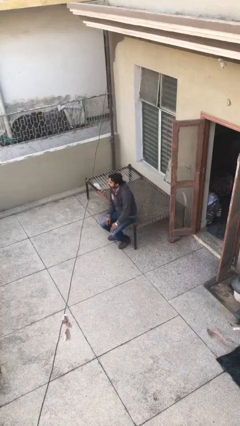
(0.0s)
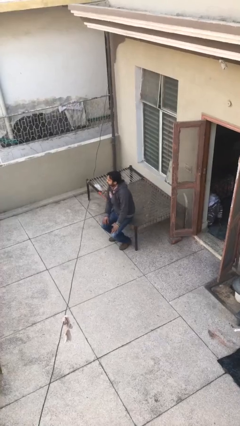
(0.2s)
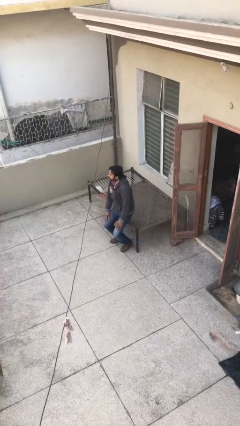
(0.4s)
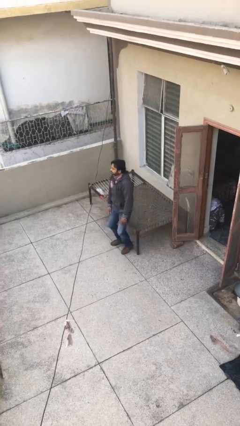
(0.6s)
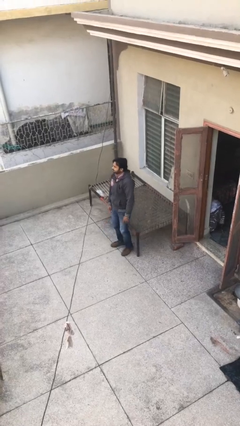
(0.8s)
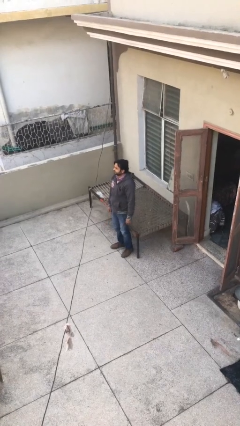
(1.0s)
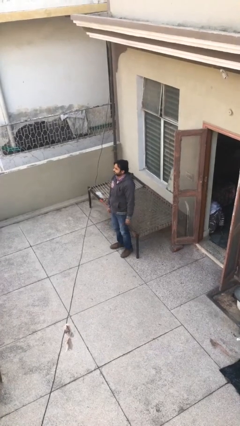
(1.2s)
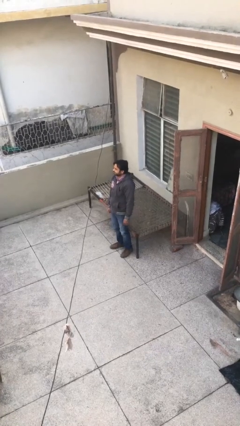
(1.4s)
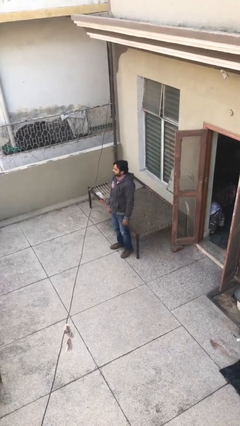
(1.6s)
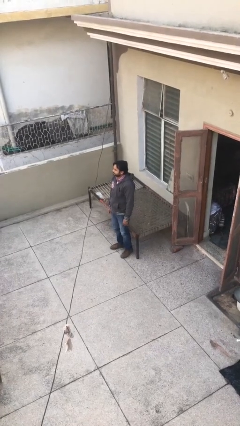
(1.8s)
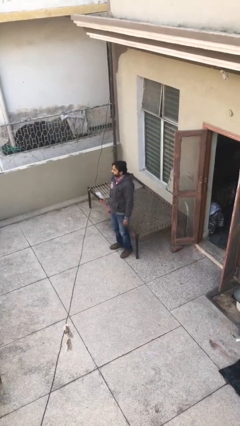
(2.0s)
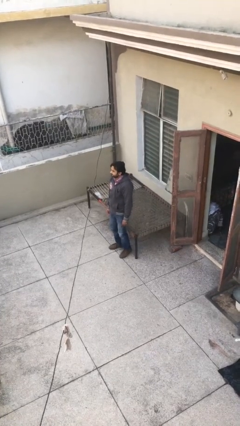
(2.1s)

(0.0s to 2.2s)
person stands up

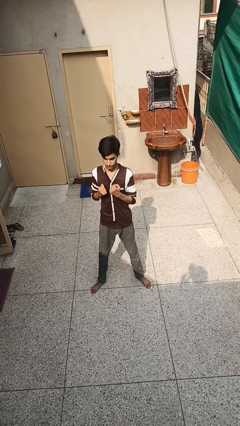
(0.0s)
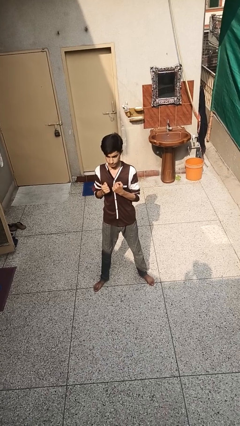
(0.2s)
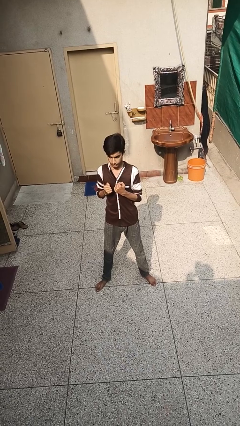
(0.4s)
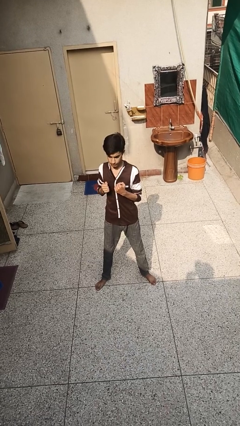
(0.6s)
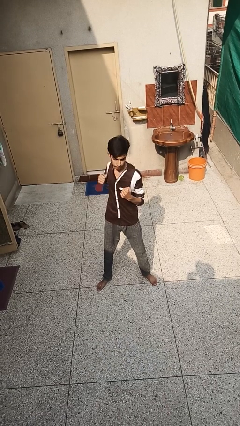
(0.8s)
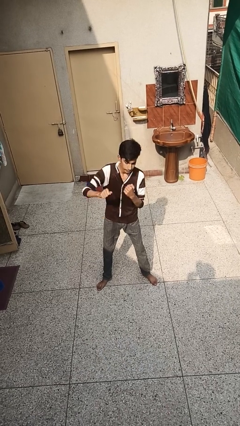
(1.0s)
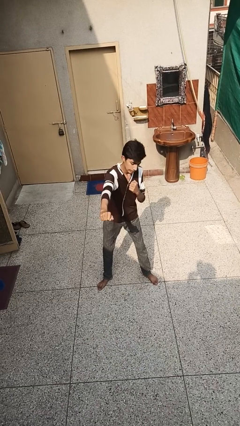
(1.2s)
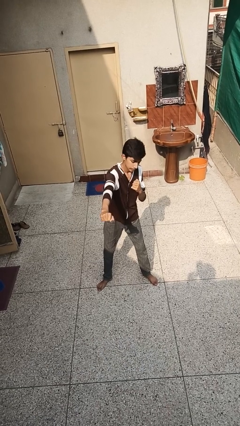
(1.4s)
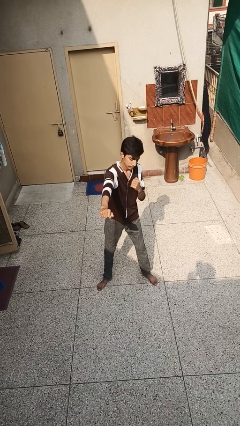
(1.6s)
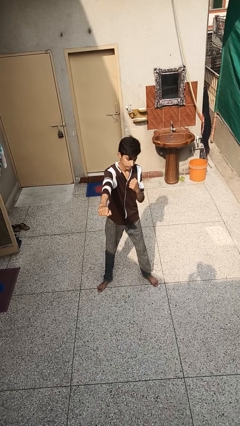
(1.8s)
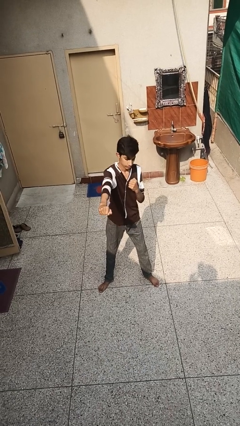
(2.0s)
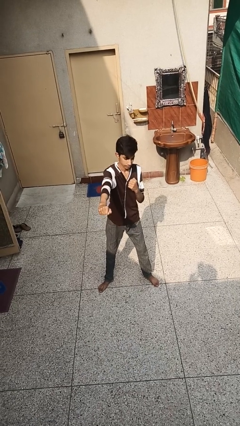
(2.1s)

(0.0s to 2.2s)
person punches

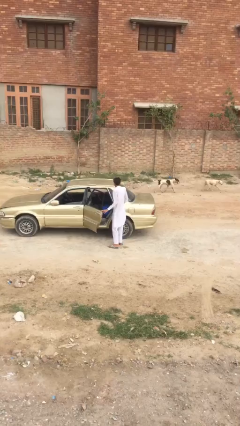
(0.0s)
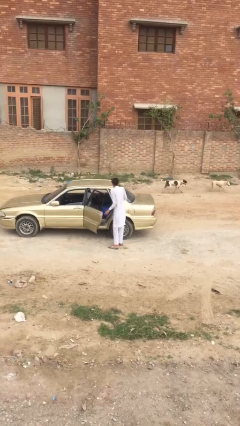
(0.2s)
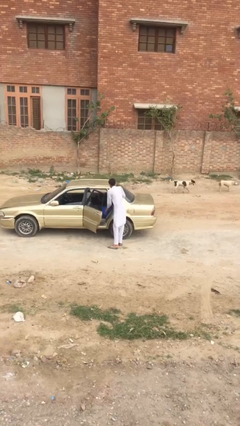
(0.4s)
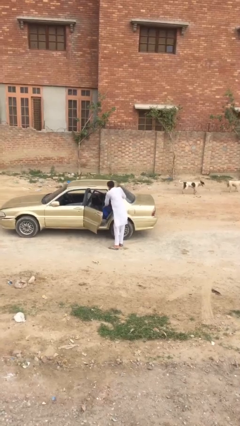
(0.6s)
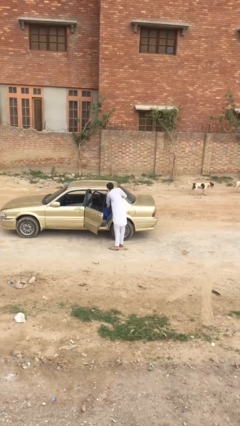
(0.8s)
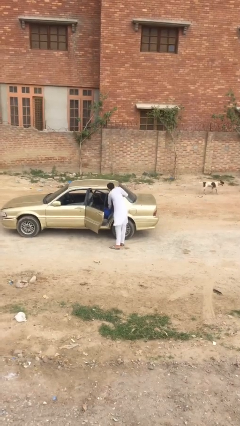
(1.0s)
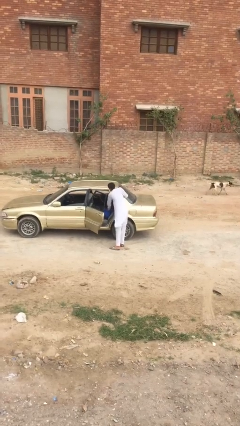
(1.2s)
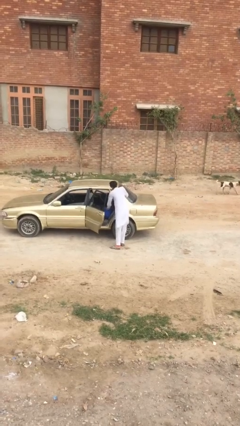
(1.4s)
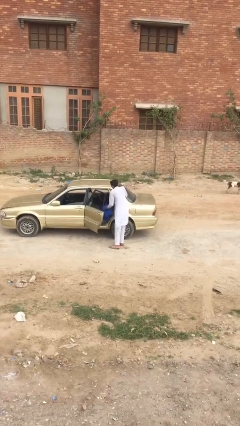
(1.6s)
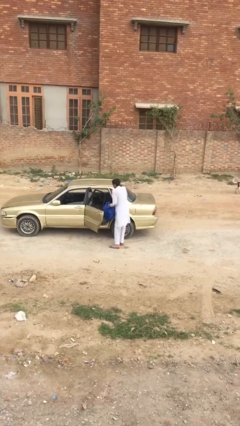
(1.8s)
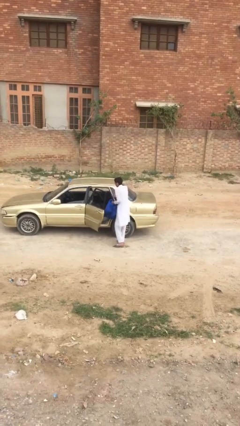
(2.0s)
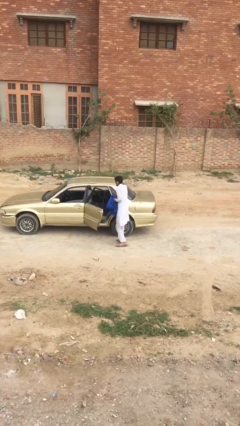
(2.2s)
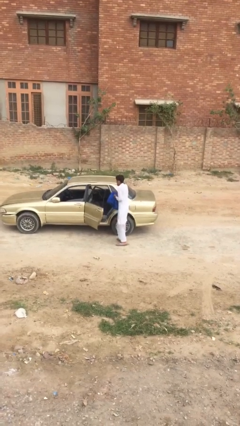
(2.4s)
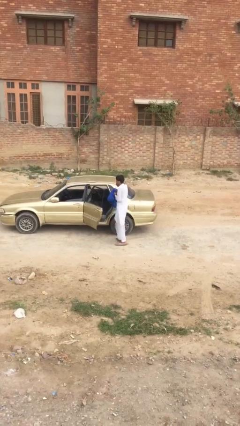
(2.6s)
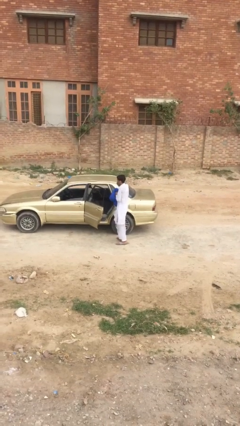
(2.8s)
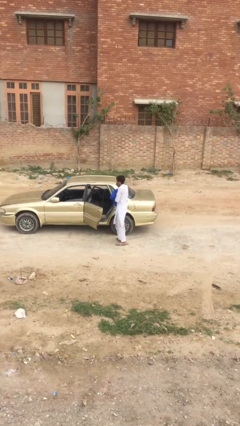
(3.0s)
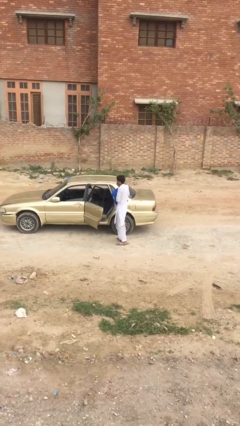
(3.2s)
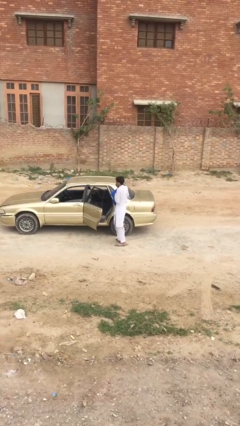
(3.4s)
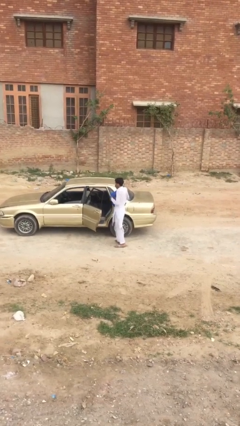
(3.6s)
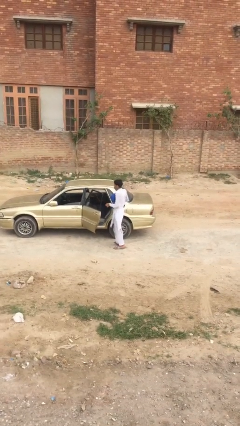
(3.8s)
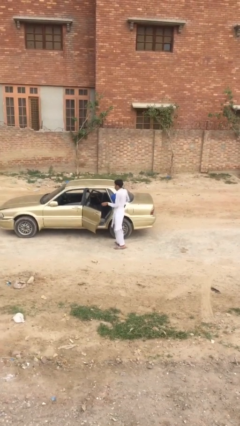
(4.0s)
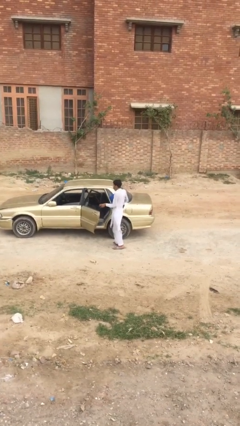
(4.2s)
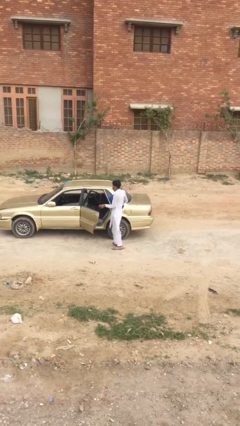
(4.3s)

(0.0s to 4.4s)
person unloads car

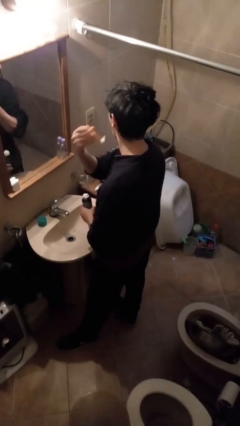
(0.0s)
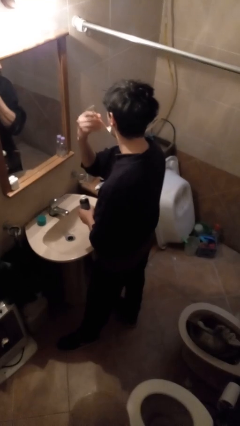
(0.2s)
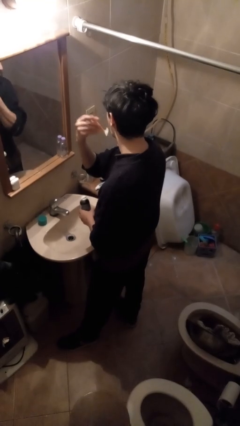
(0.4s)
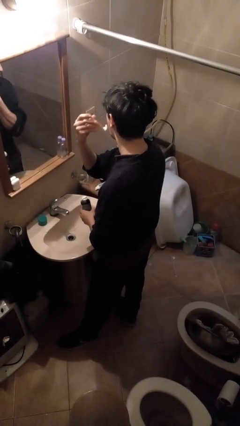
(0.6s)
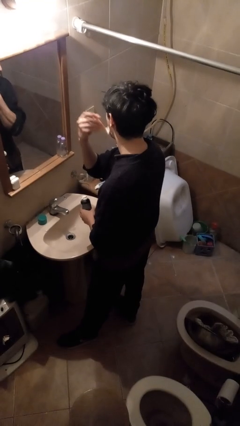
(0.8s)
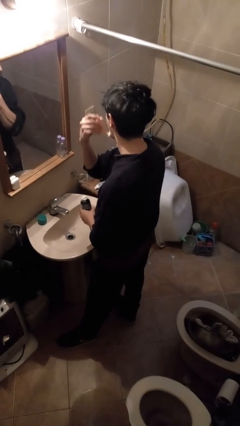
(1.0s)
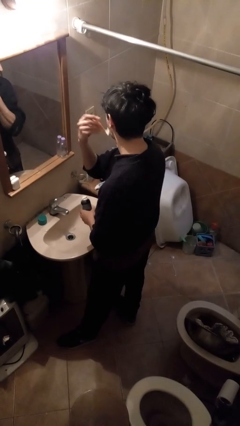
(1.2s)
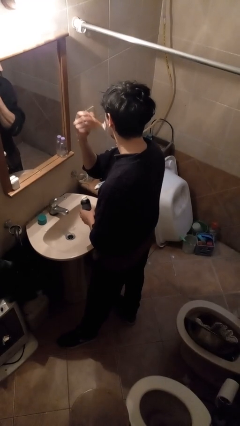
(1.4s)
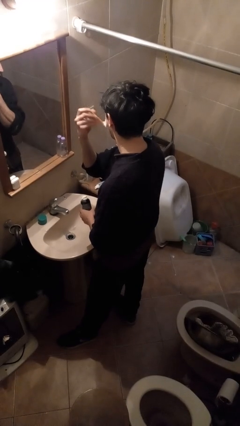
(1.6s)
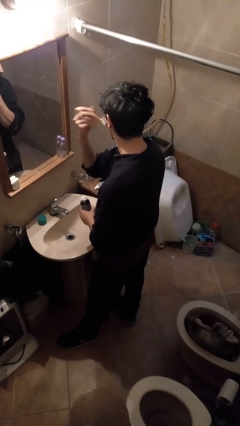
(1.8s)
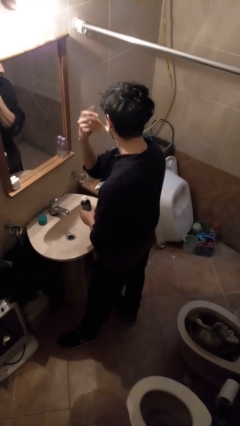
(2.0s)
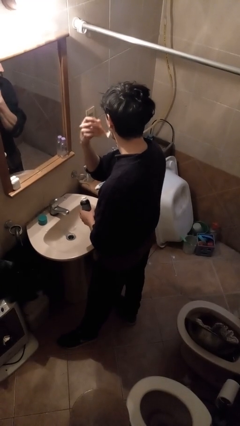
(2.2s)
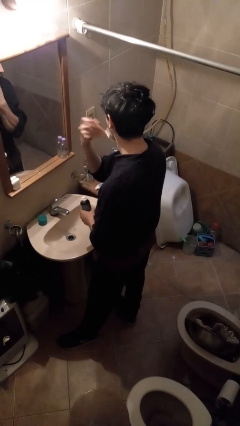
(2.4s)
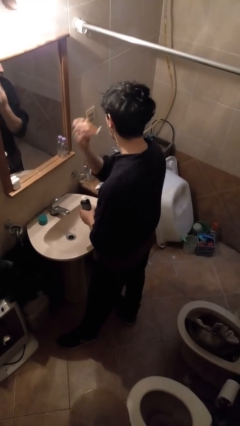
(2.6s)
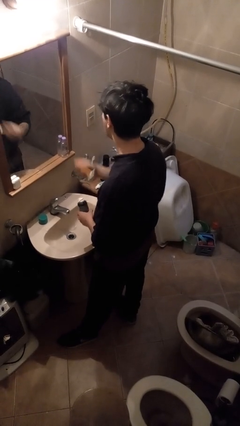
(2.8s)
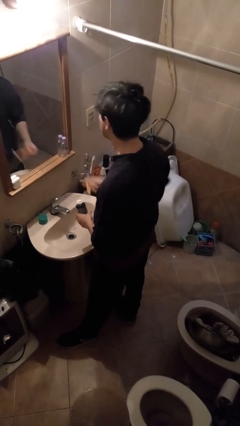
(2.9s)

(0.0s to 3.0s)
person shaves face

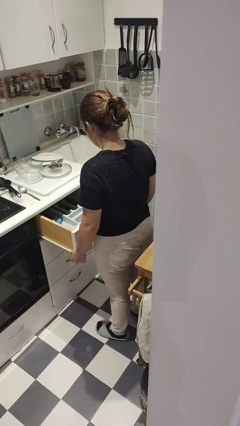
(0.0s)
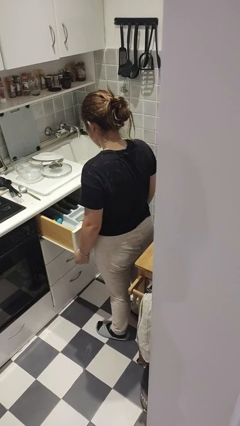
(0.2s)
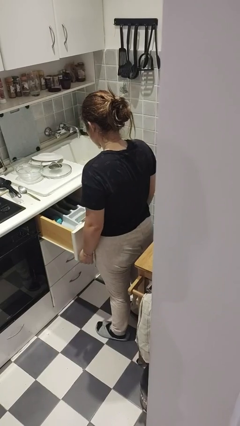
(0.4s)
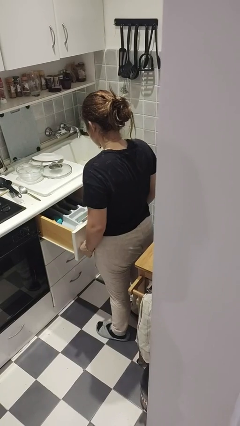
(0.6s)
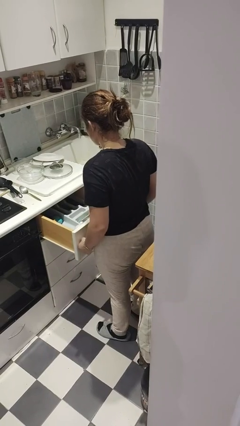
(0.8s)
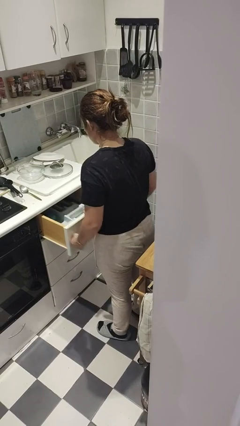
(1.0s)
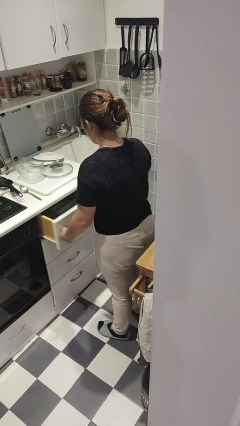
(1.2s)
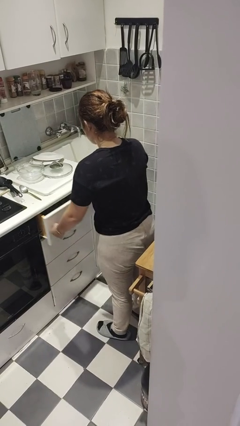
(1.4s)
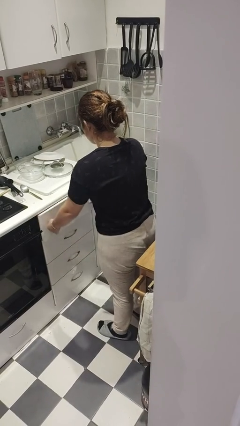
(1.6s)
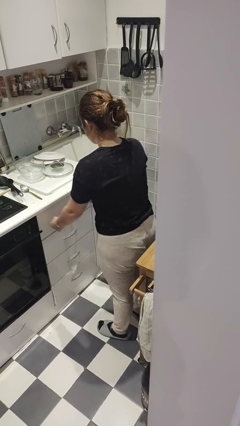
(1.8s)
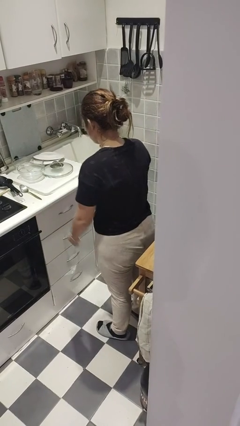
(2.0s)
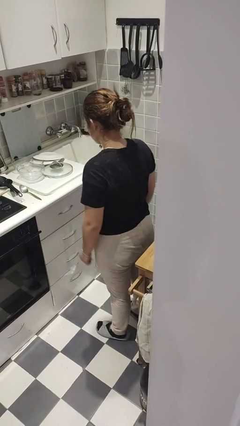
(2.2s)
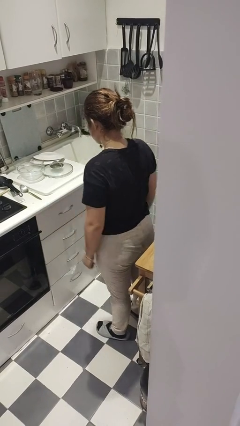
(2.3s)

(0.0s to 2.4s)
person closes kitchen drawer

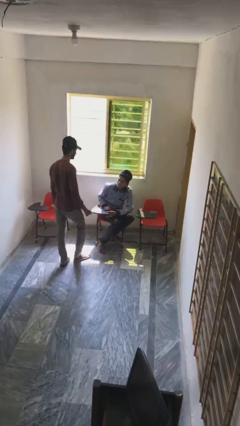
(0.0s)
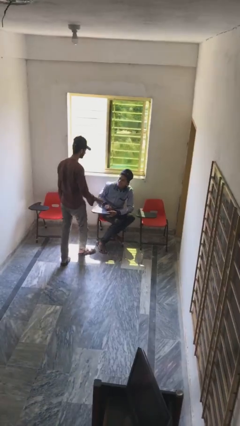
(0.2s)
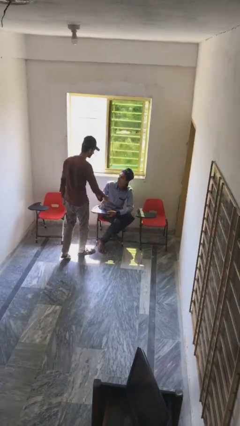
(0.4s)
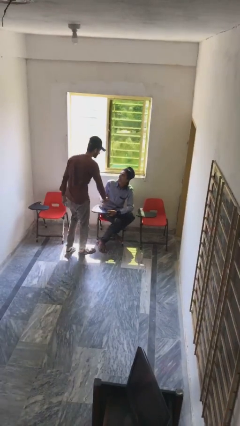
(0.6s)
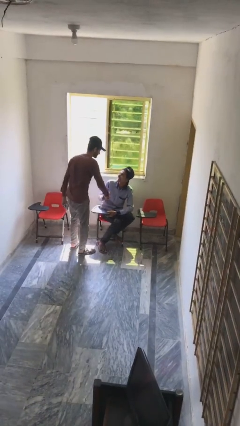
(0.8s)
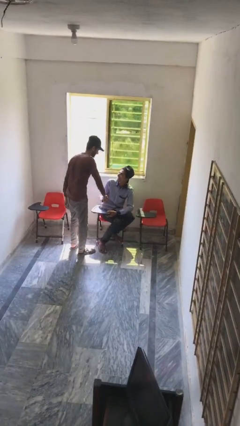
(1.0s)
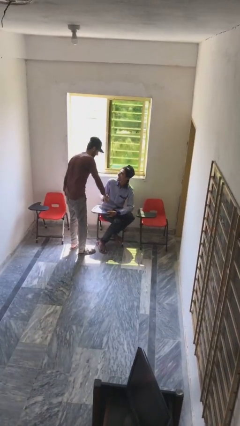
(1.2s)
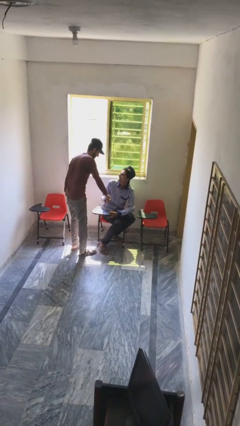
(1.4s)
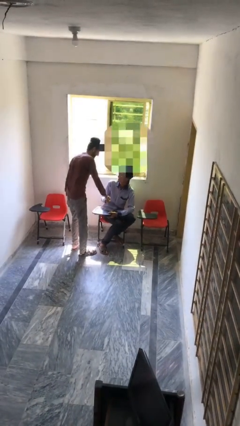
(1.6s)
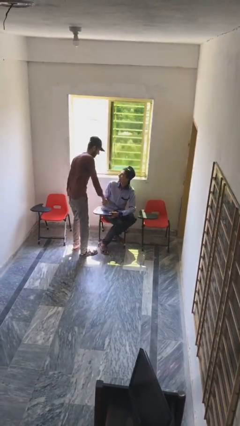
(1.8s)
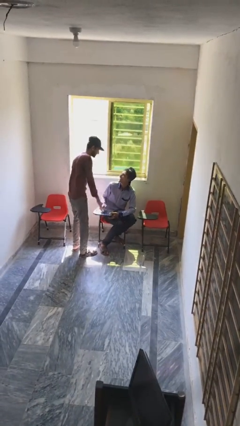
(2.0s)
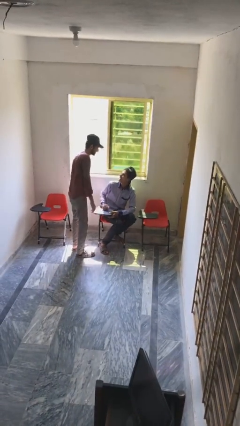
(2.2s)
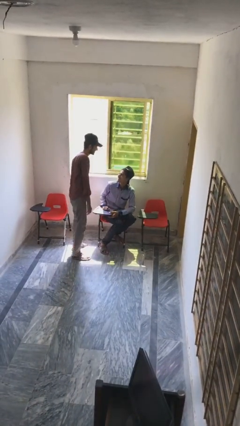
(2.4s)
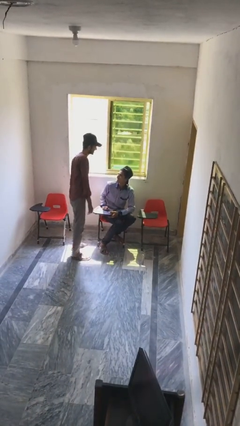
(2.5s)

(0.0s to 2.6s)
person shakes hand

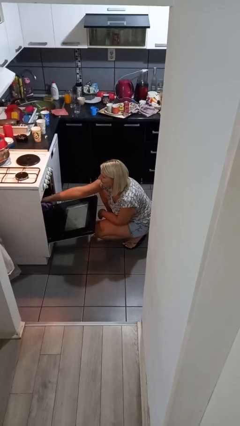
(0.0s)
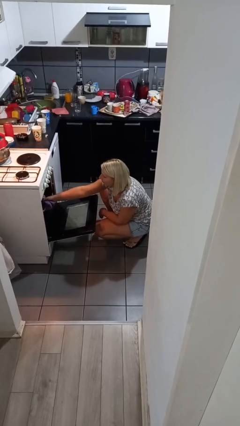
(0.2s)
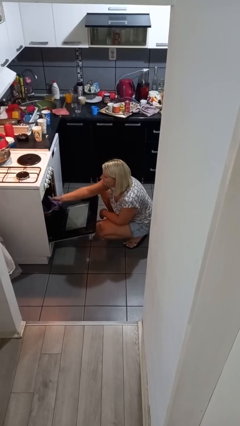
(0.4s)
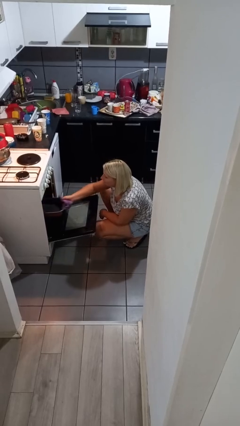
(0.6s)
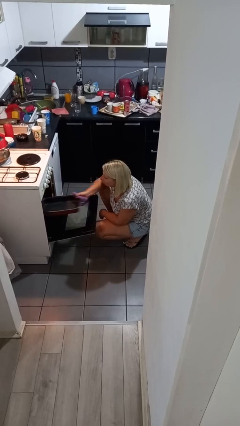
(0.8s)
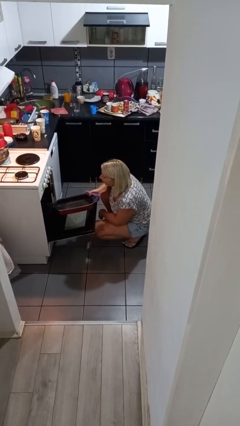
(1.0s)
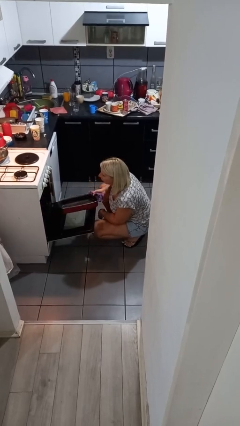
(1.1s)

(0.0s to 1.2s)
person takes object from oven
